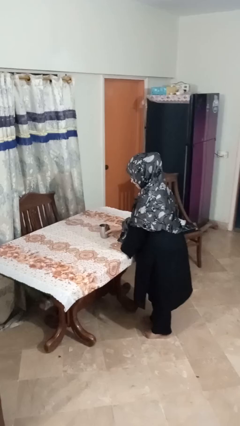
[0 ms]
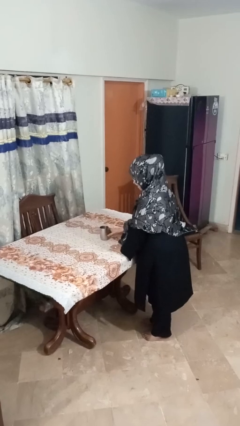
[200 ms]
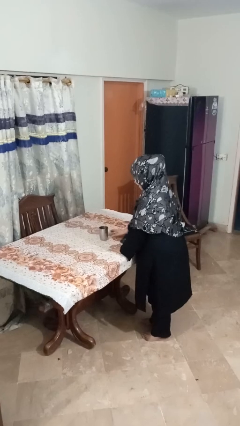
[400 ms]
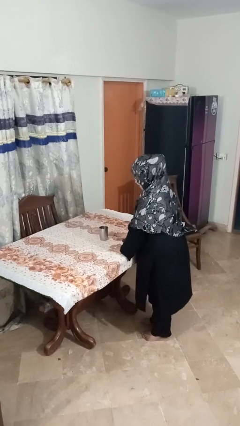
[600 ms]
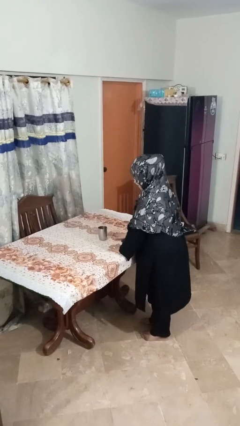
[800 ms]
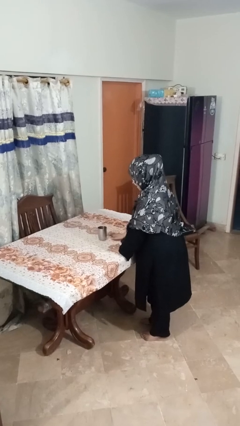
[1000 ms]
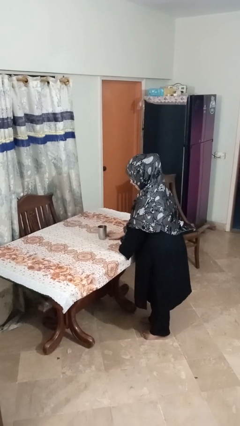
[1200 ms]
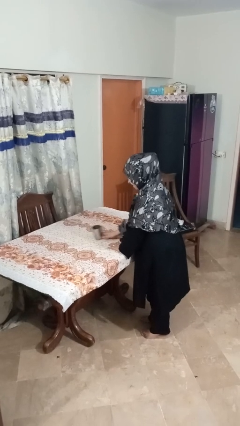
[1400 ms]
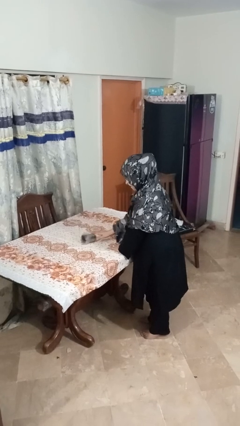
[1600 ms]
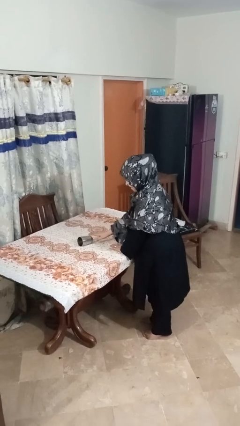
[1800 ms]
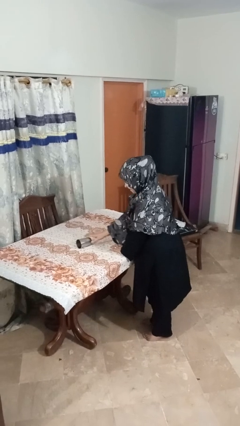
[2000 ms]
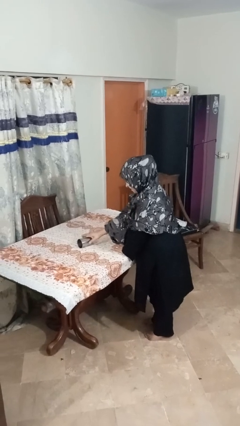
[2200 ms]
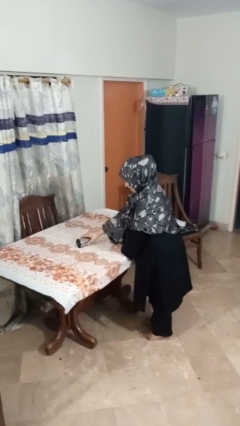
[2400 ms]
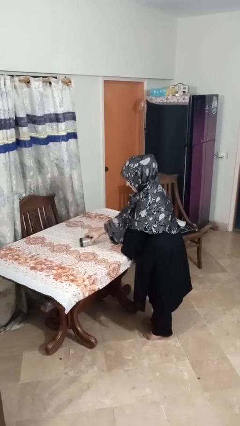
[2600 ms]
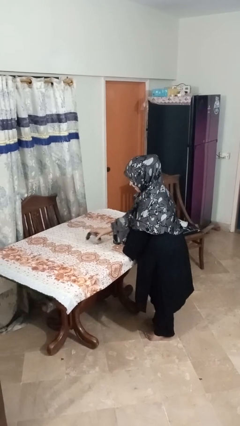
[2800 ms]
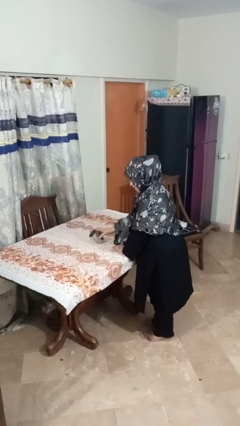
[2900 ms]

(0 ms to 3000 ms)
person sets upright glass

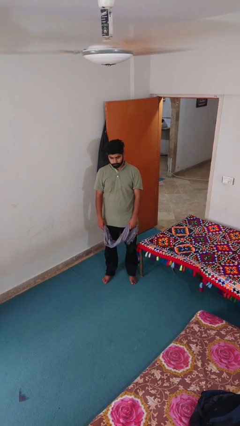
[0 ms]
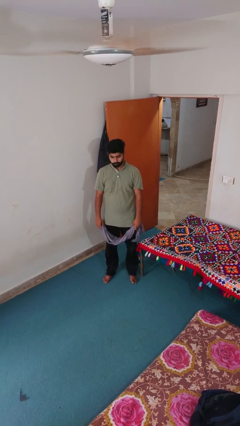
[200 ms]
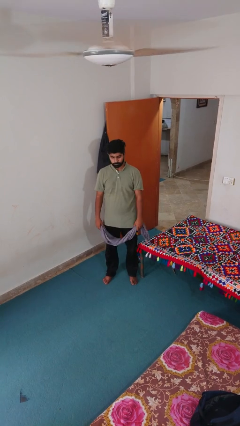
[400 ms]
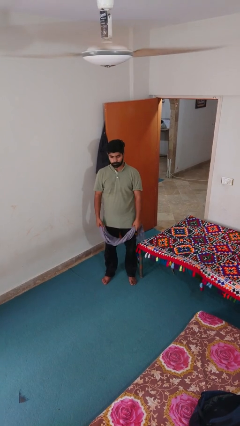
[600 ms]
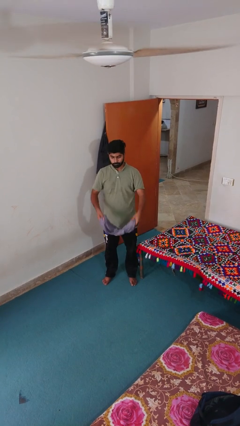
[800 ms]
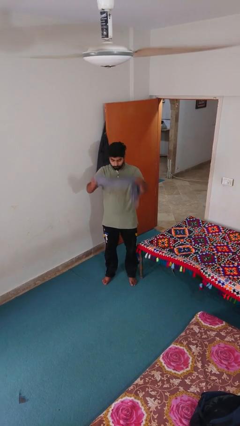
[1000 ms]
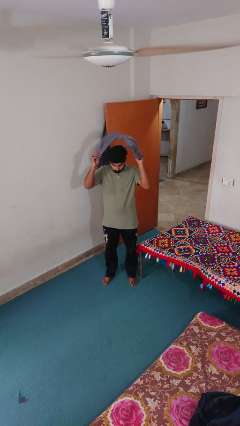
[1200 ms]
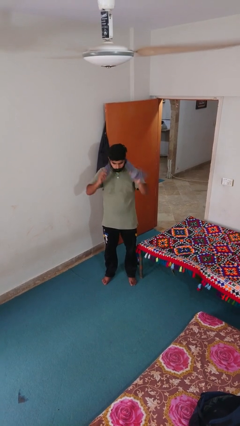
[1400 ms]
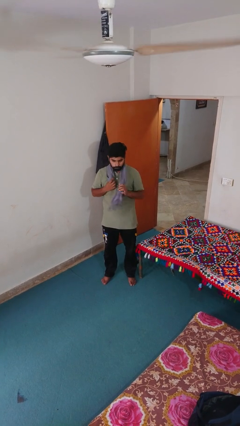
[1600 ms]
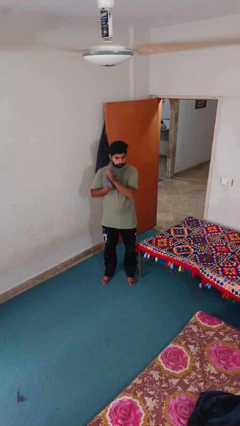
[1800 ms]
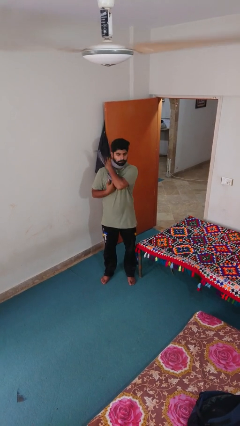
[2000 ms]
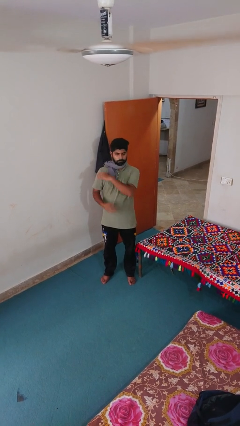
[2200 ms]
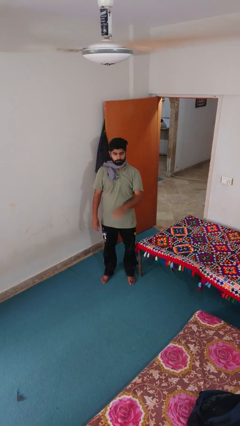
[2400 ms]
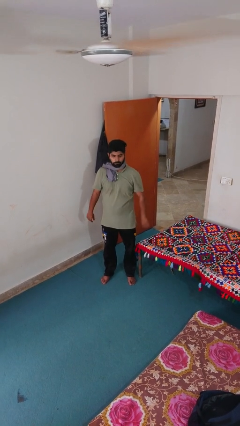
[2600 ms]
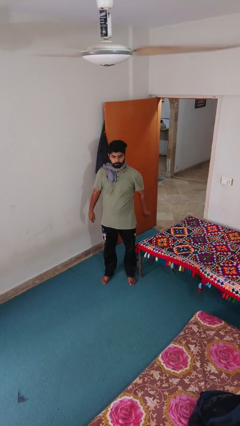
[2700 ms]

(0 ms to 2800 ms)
person puts on scarf

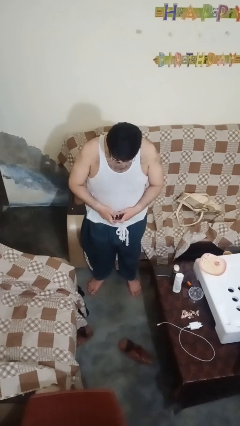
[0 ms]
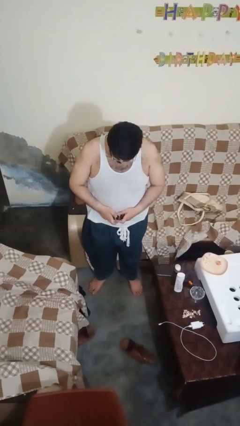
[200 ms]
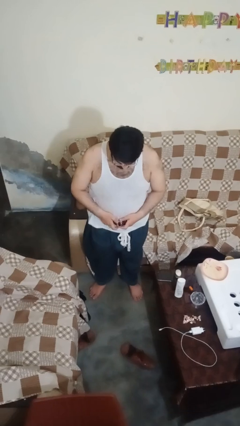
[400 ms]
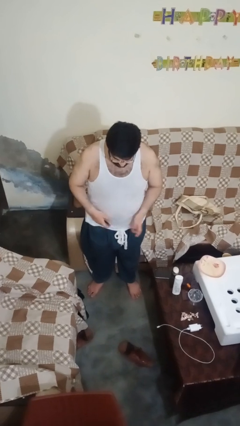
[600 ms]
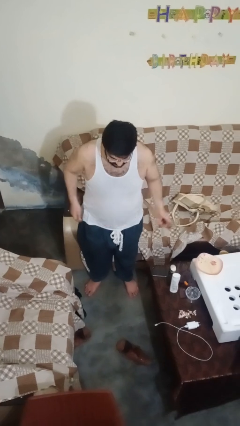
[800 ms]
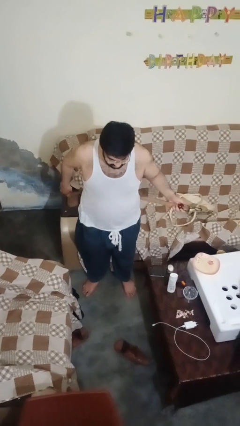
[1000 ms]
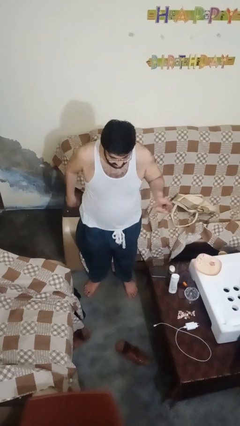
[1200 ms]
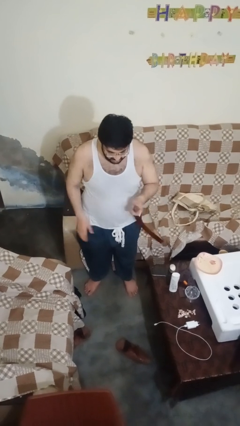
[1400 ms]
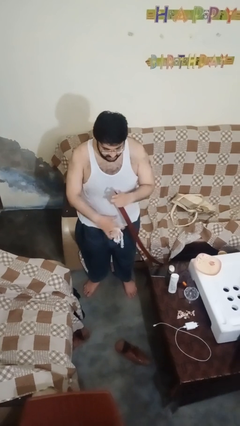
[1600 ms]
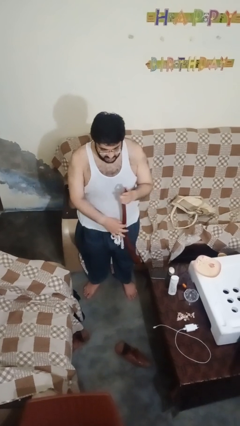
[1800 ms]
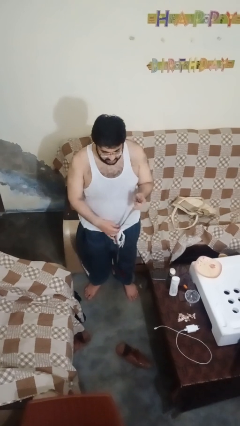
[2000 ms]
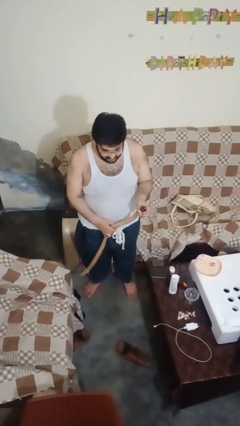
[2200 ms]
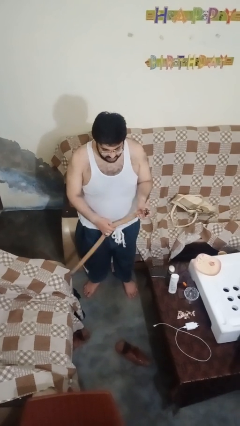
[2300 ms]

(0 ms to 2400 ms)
person takes off belt

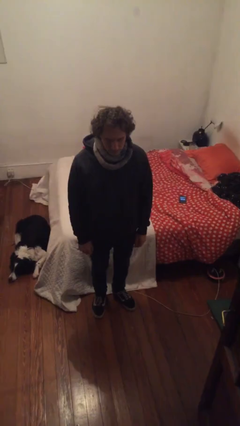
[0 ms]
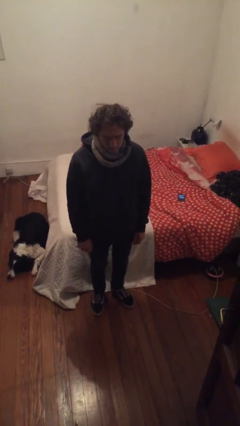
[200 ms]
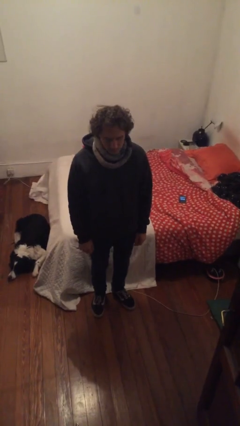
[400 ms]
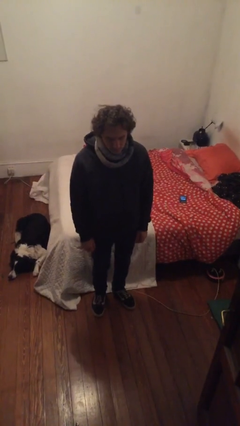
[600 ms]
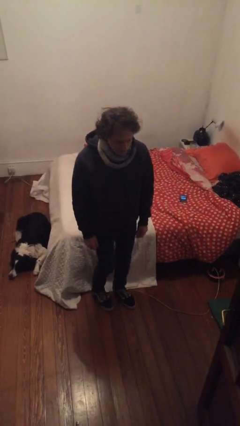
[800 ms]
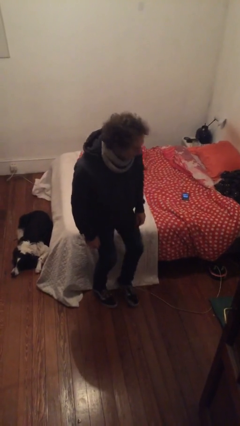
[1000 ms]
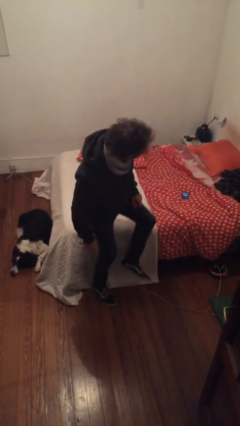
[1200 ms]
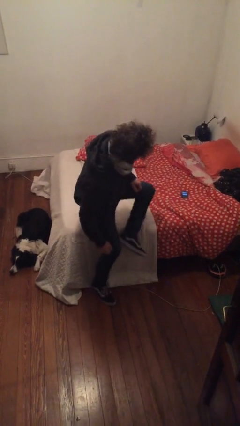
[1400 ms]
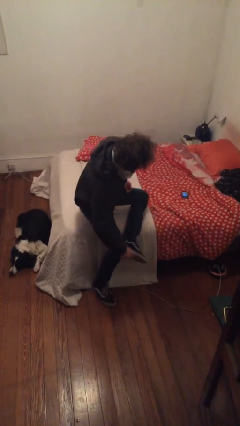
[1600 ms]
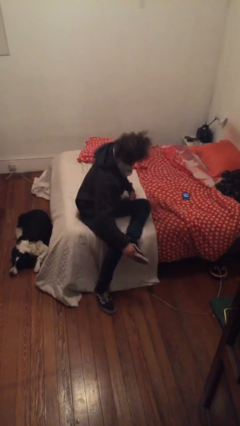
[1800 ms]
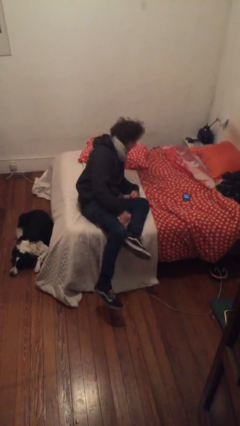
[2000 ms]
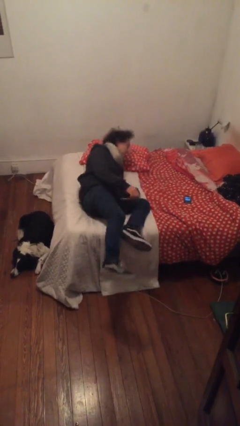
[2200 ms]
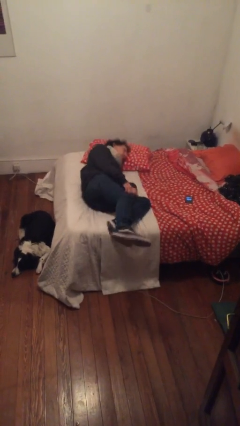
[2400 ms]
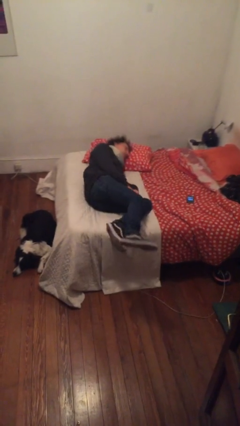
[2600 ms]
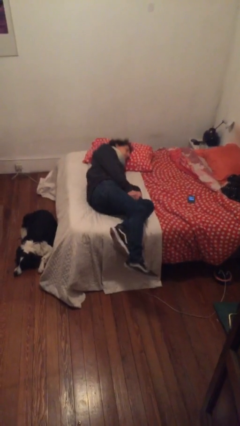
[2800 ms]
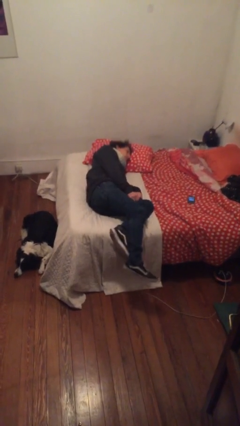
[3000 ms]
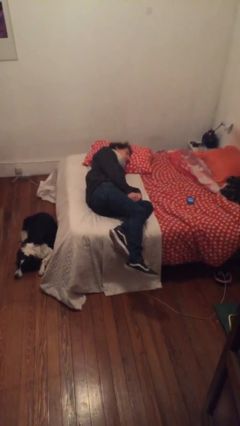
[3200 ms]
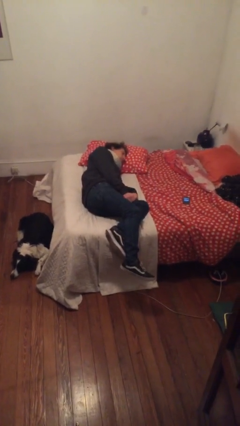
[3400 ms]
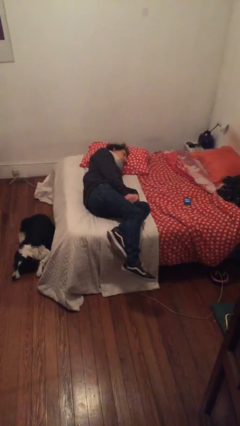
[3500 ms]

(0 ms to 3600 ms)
person lies down on bed

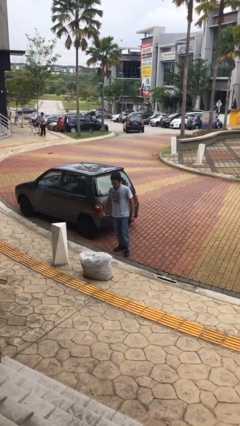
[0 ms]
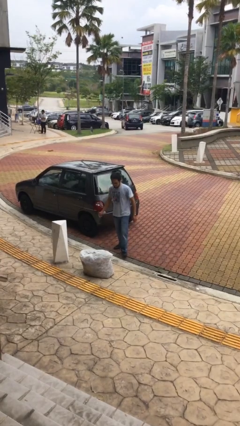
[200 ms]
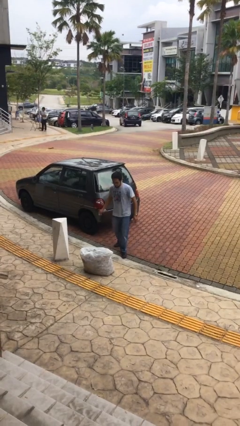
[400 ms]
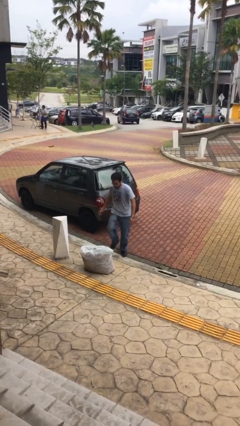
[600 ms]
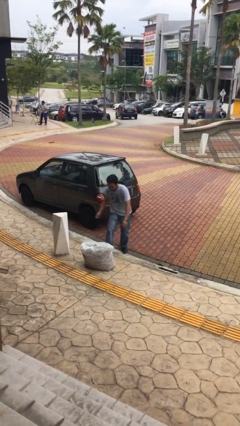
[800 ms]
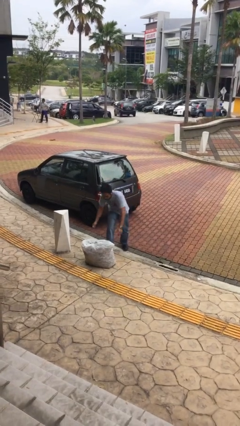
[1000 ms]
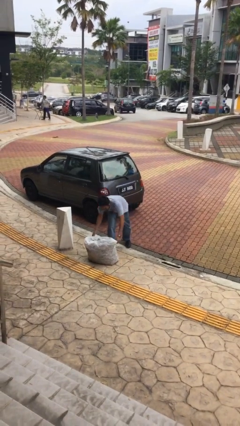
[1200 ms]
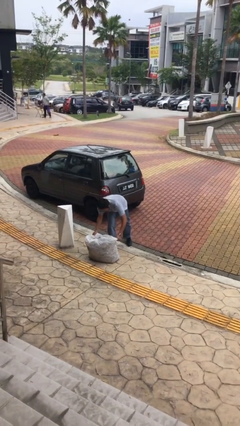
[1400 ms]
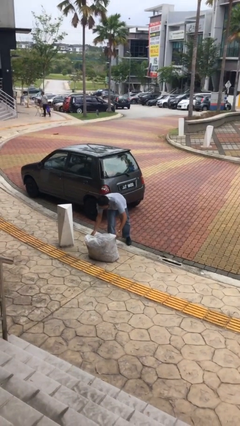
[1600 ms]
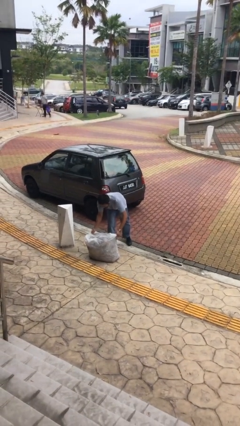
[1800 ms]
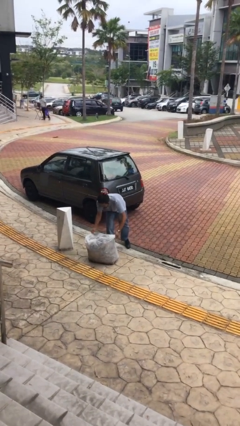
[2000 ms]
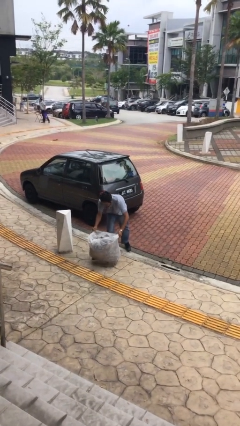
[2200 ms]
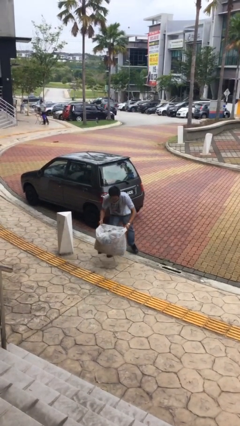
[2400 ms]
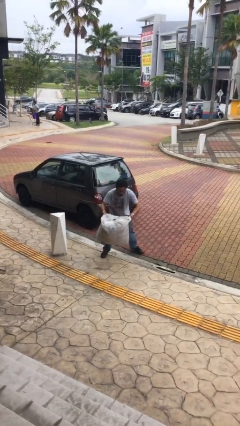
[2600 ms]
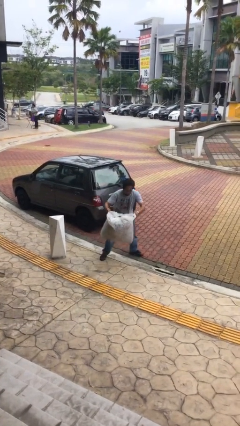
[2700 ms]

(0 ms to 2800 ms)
person picks up object from floor

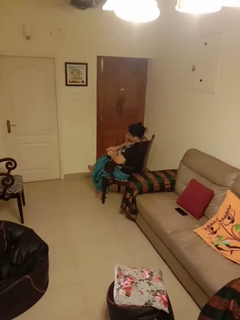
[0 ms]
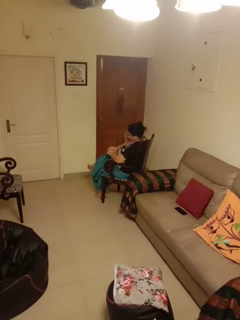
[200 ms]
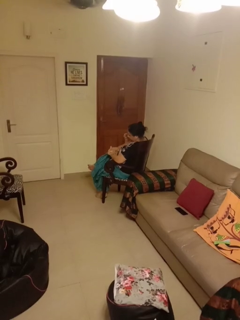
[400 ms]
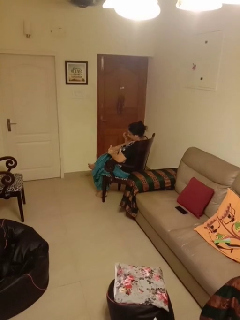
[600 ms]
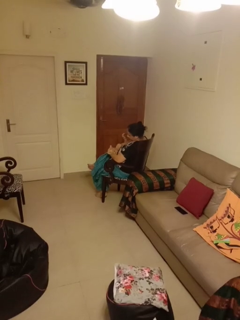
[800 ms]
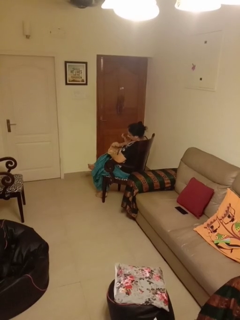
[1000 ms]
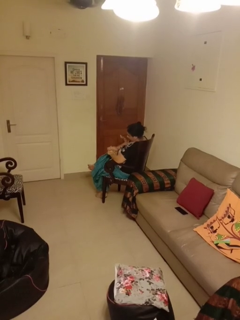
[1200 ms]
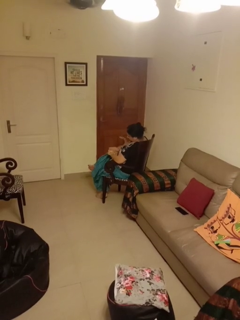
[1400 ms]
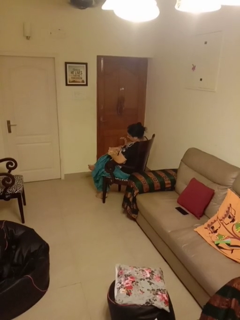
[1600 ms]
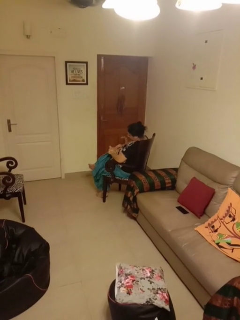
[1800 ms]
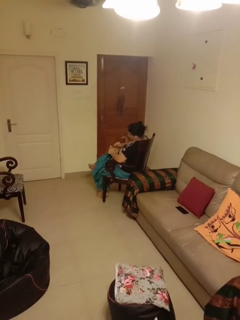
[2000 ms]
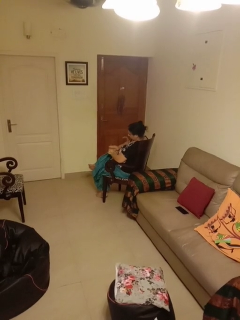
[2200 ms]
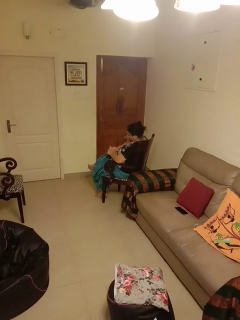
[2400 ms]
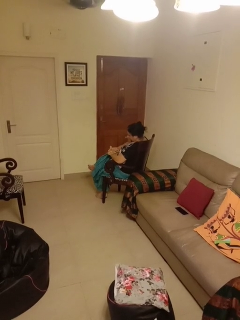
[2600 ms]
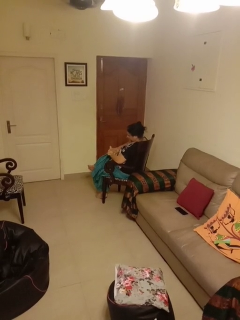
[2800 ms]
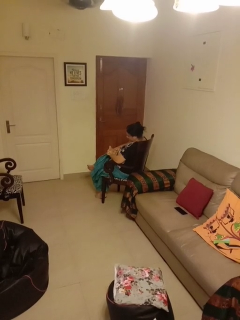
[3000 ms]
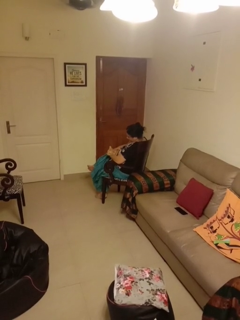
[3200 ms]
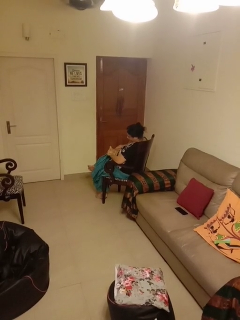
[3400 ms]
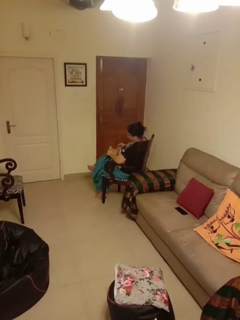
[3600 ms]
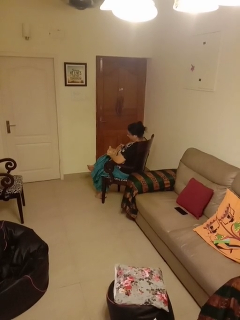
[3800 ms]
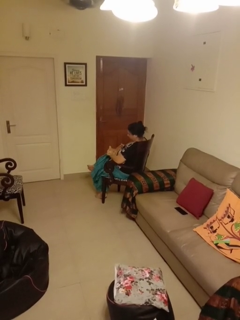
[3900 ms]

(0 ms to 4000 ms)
person pets cat
